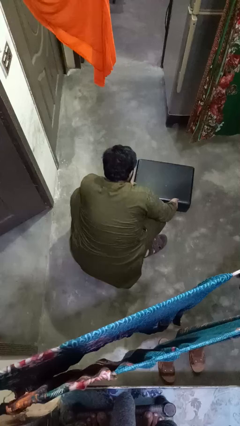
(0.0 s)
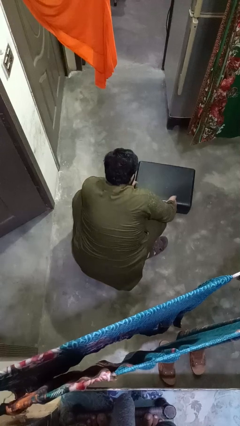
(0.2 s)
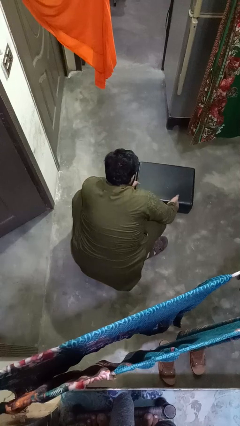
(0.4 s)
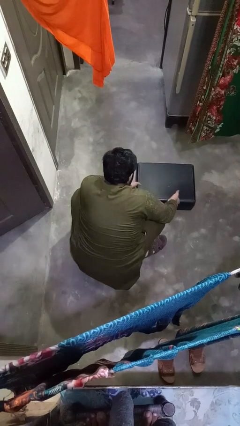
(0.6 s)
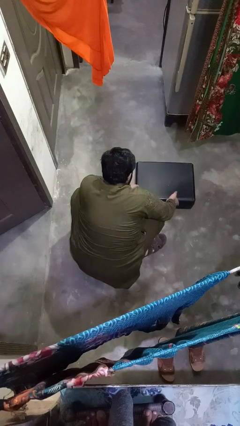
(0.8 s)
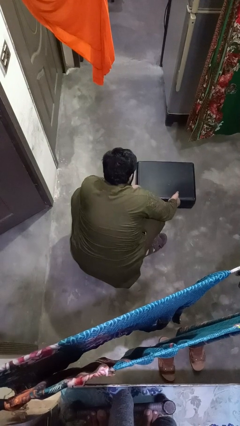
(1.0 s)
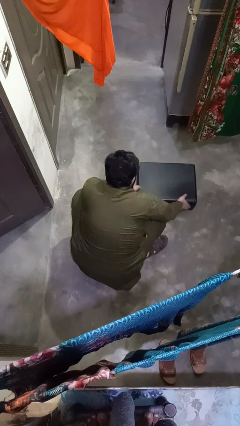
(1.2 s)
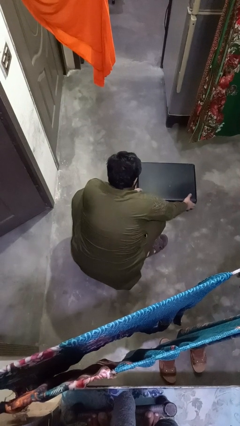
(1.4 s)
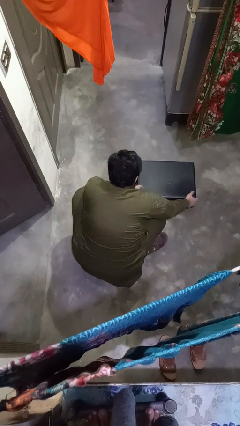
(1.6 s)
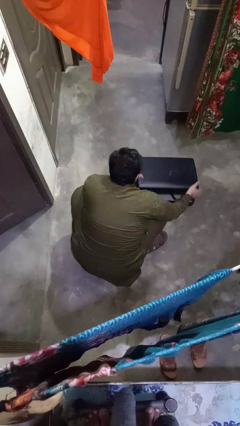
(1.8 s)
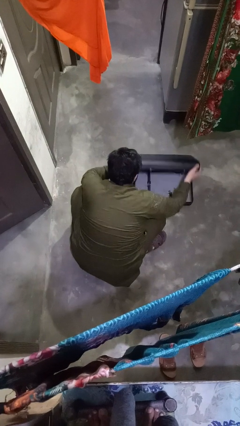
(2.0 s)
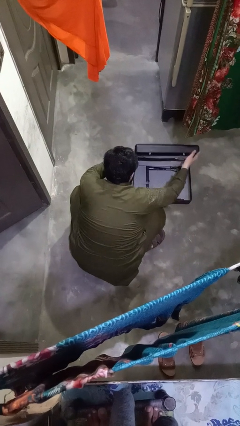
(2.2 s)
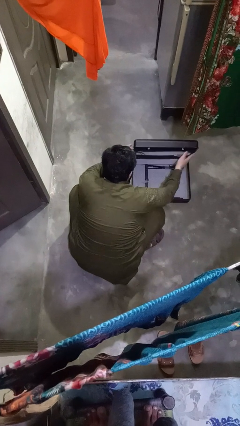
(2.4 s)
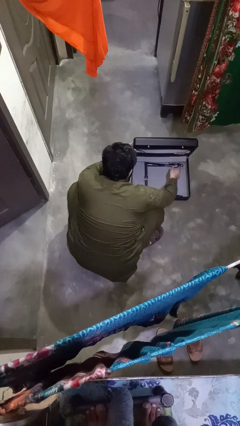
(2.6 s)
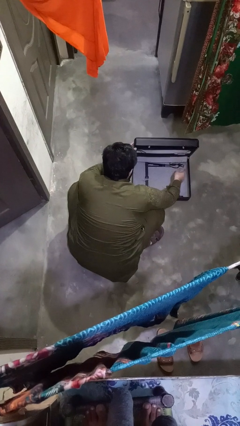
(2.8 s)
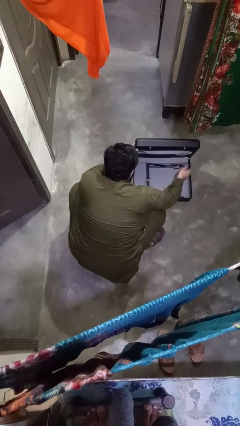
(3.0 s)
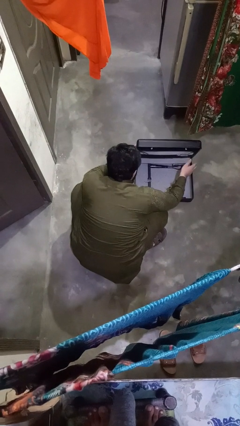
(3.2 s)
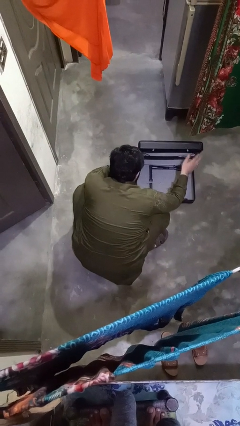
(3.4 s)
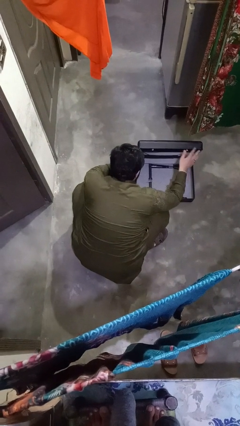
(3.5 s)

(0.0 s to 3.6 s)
person opens suitcase

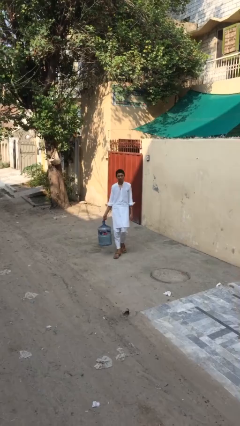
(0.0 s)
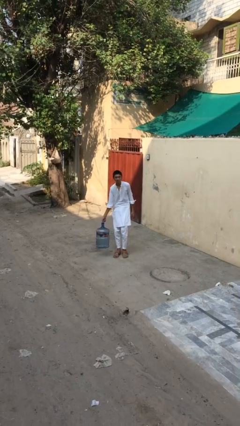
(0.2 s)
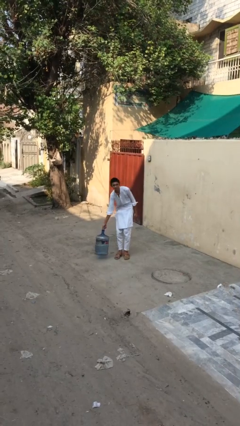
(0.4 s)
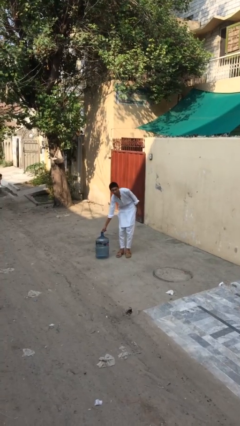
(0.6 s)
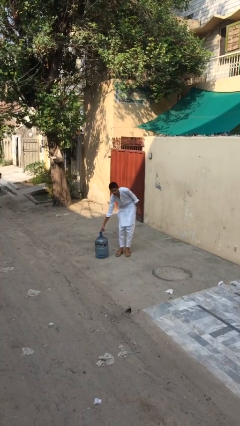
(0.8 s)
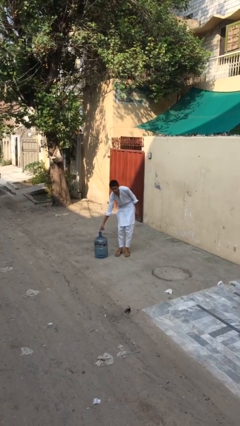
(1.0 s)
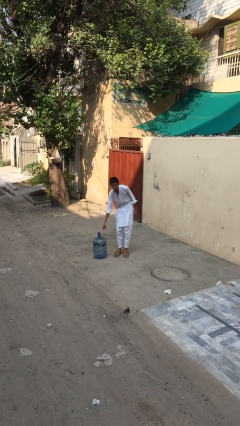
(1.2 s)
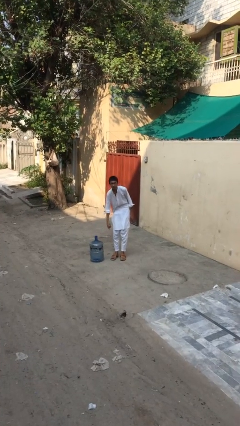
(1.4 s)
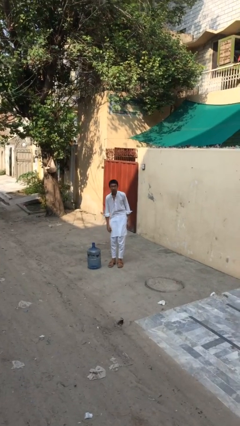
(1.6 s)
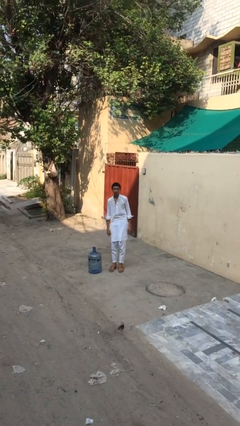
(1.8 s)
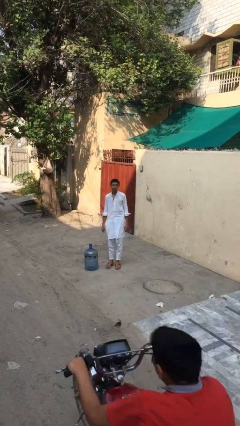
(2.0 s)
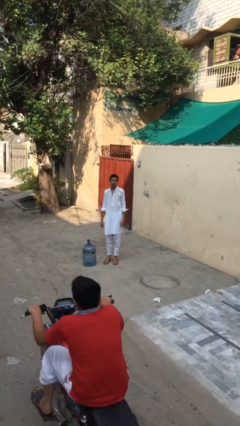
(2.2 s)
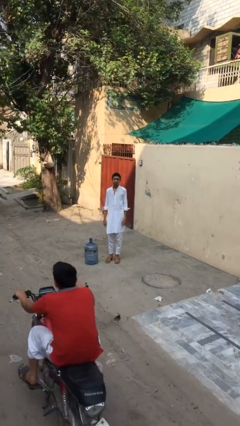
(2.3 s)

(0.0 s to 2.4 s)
person puts down object on floor

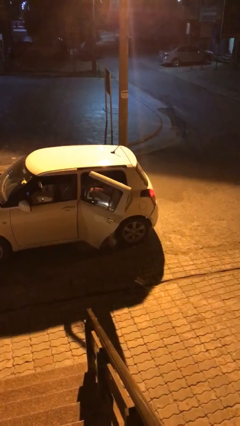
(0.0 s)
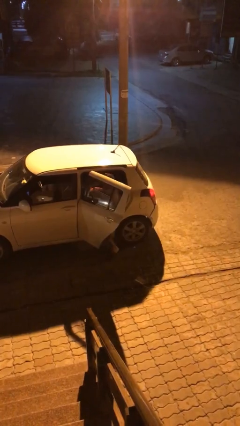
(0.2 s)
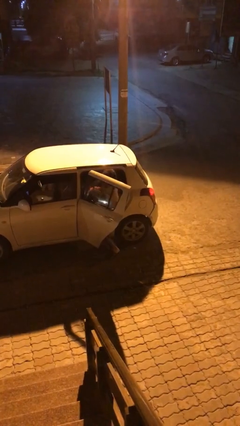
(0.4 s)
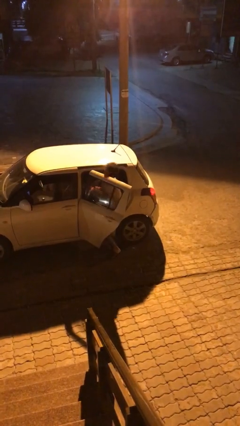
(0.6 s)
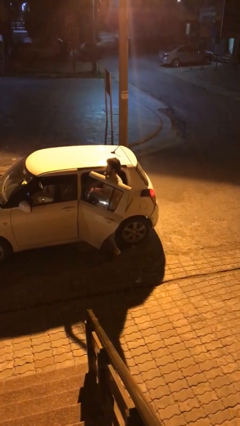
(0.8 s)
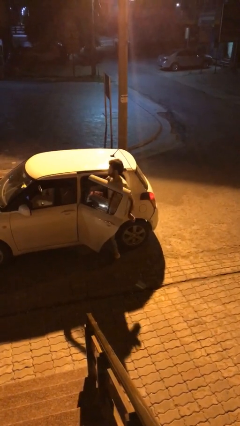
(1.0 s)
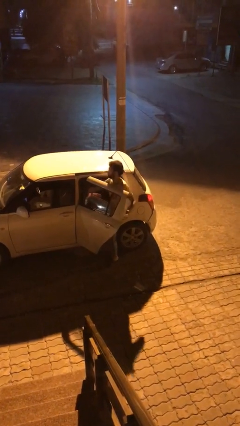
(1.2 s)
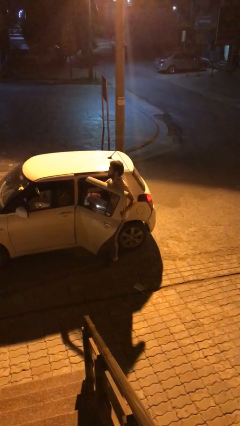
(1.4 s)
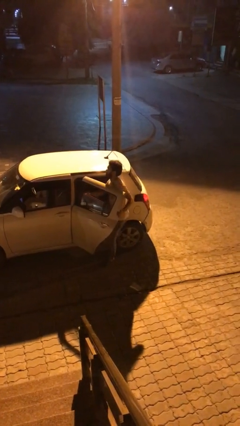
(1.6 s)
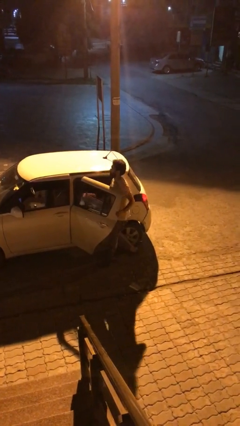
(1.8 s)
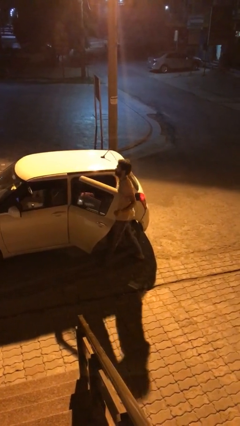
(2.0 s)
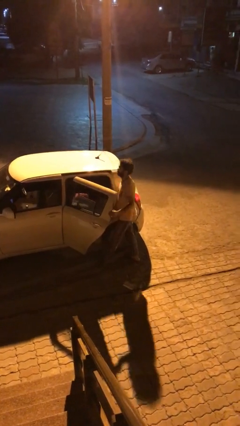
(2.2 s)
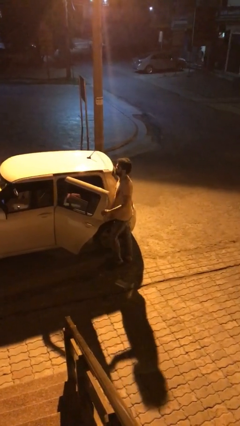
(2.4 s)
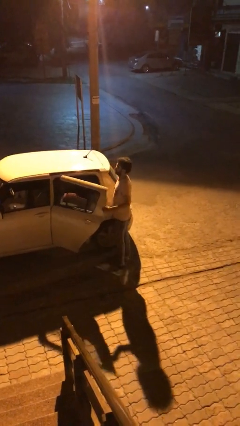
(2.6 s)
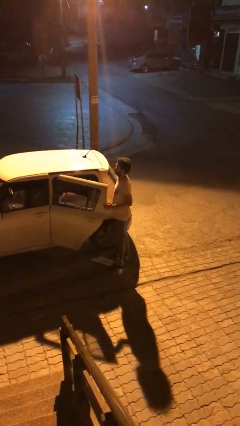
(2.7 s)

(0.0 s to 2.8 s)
person exits car

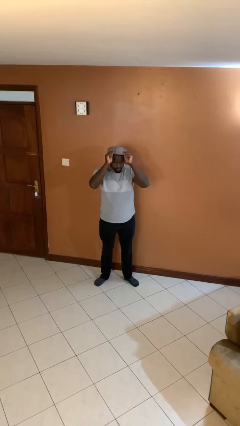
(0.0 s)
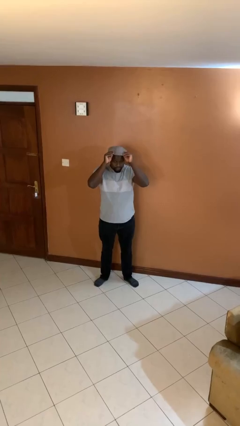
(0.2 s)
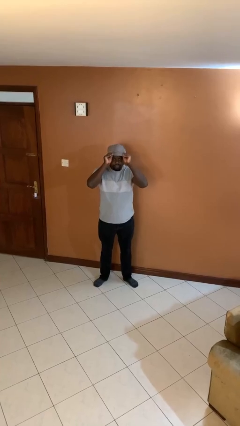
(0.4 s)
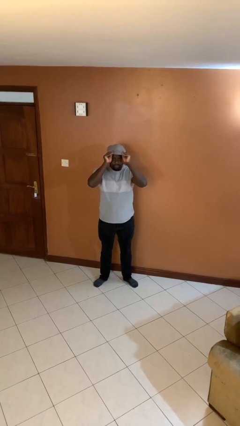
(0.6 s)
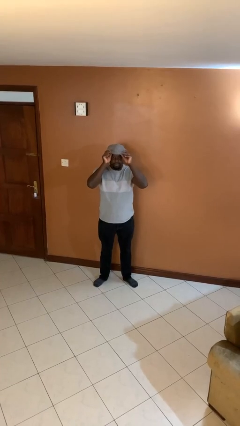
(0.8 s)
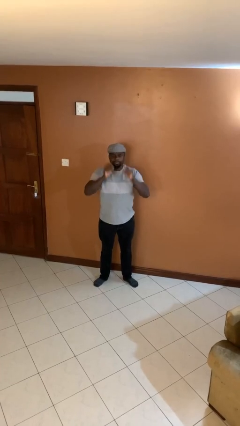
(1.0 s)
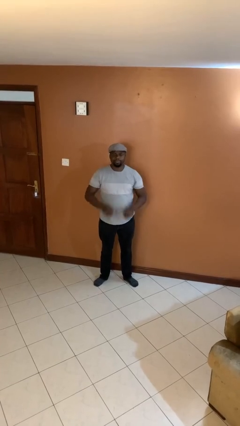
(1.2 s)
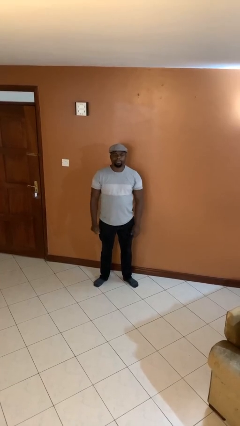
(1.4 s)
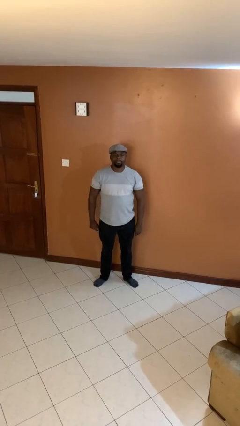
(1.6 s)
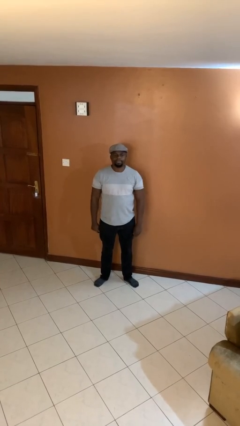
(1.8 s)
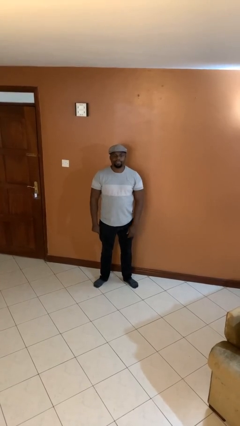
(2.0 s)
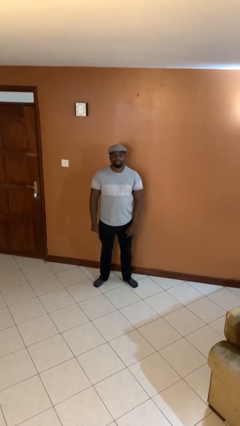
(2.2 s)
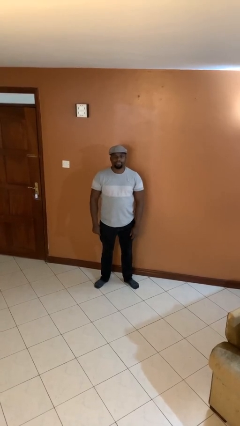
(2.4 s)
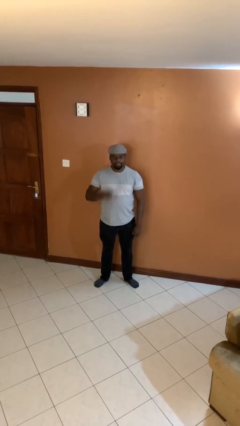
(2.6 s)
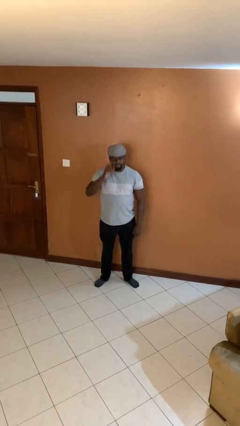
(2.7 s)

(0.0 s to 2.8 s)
person puts on hat

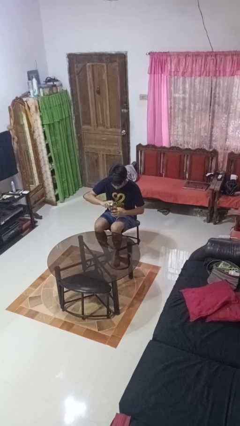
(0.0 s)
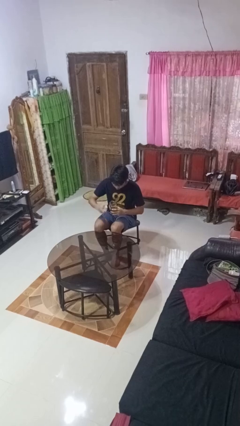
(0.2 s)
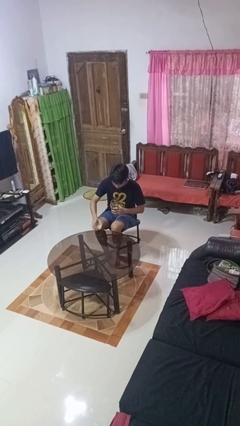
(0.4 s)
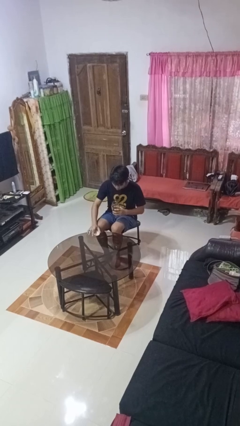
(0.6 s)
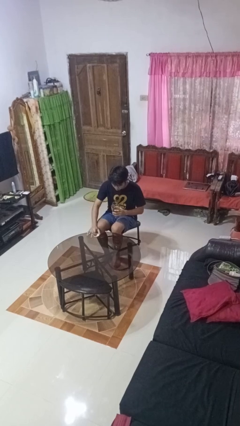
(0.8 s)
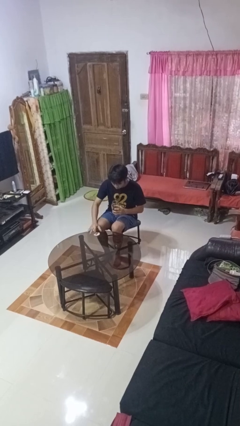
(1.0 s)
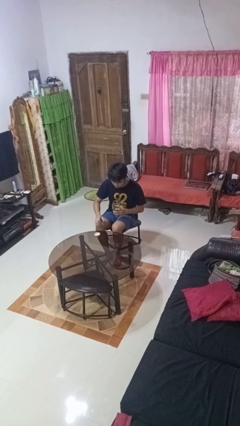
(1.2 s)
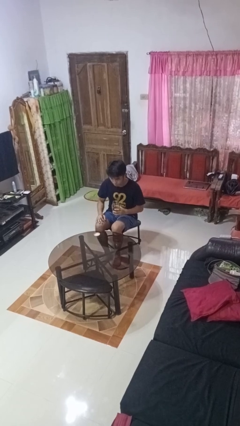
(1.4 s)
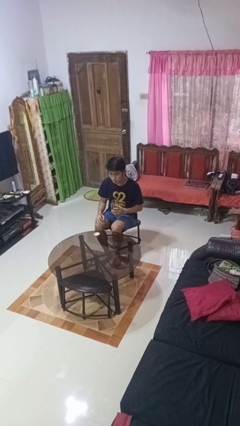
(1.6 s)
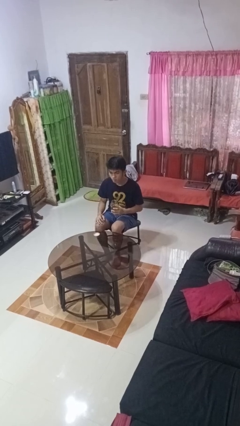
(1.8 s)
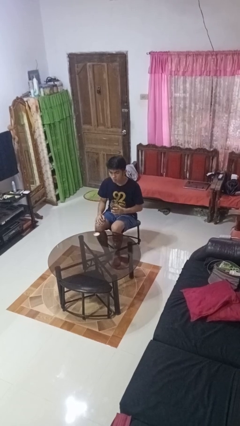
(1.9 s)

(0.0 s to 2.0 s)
person opens jar

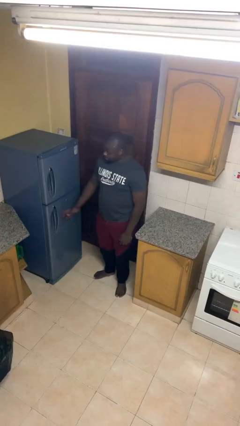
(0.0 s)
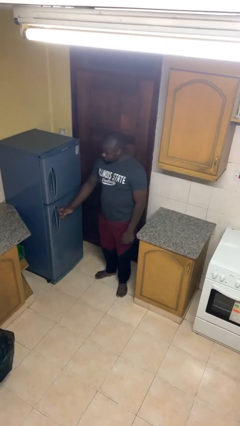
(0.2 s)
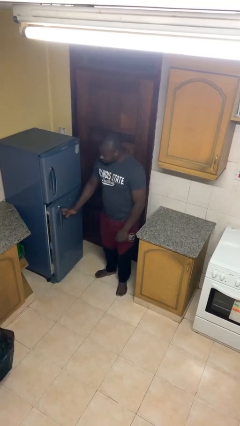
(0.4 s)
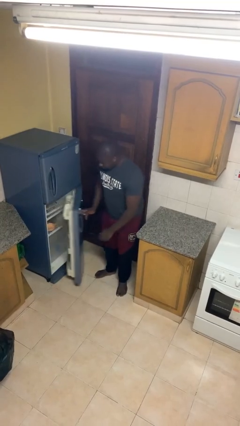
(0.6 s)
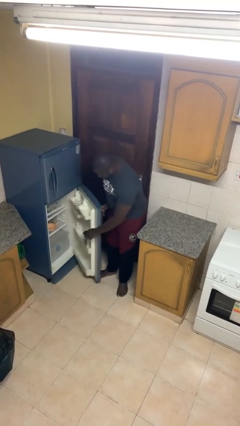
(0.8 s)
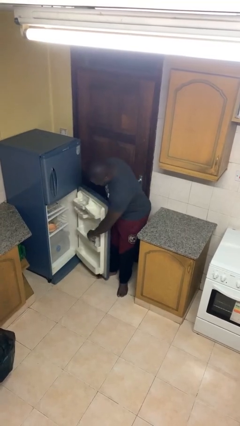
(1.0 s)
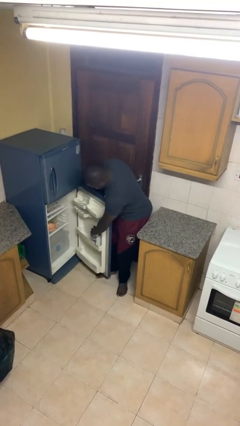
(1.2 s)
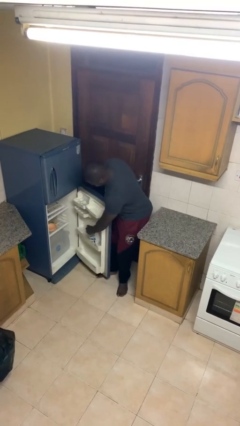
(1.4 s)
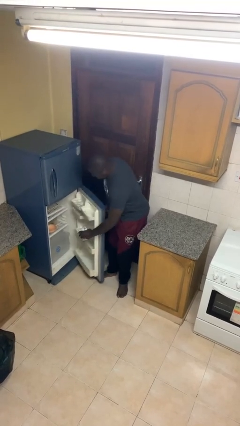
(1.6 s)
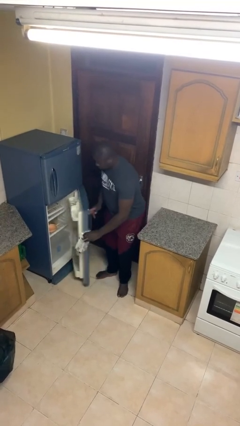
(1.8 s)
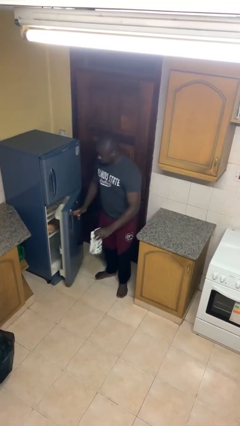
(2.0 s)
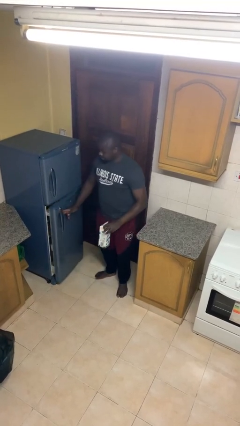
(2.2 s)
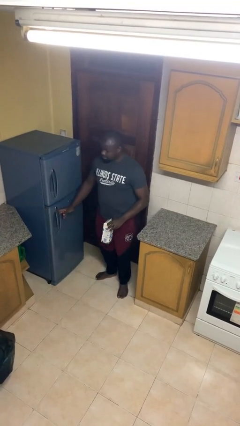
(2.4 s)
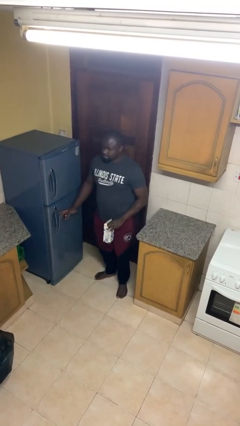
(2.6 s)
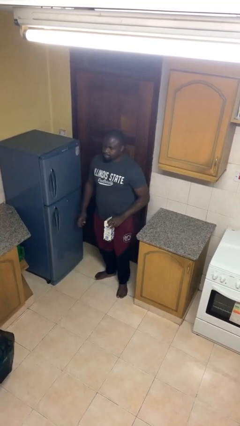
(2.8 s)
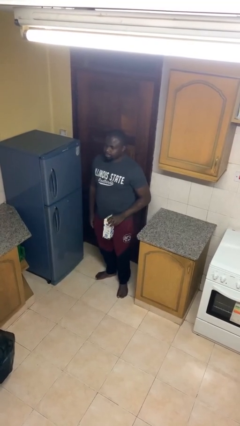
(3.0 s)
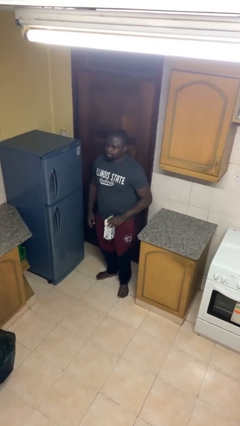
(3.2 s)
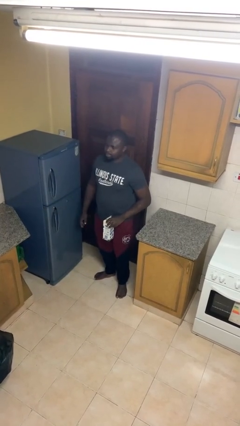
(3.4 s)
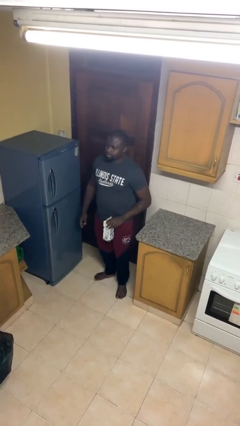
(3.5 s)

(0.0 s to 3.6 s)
person takes object from refrigerator

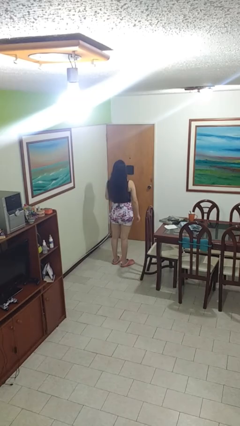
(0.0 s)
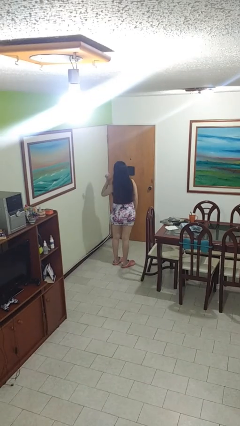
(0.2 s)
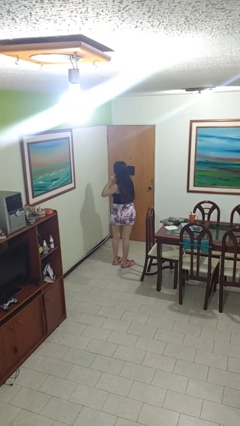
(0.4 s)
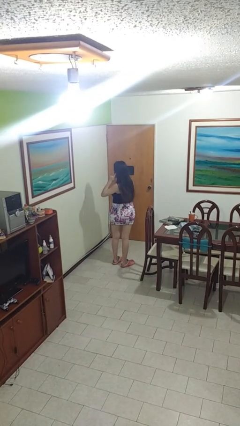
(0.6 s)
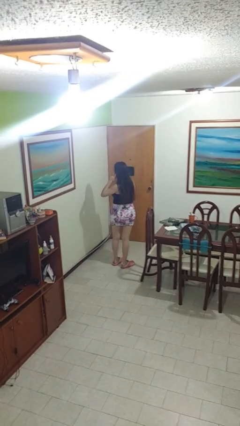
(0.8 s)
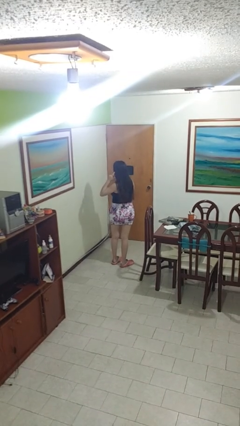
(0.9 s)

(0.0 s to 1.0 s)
person gestures listen closely
